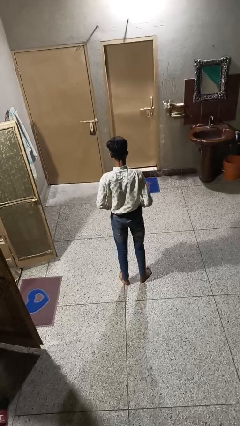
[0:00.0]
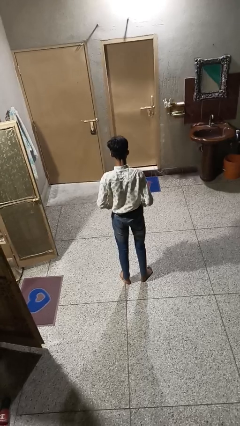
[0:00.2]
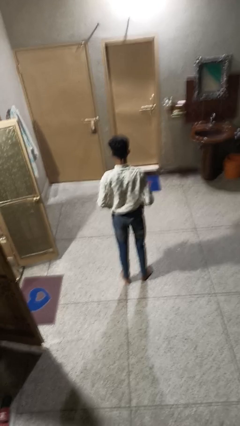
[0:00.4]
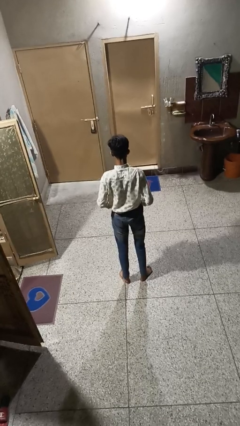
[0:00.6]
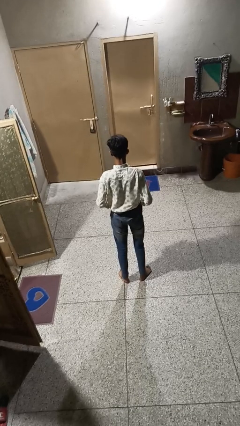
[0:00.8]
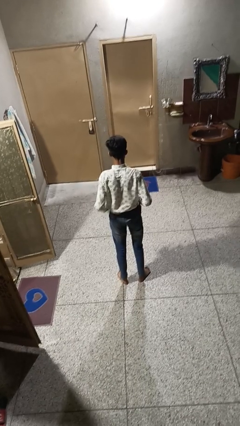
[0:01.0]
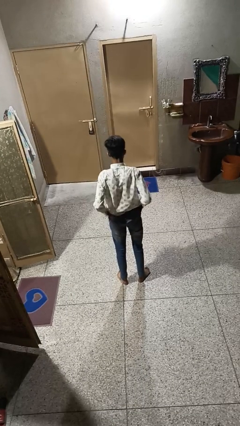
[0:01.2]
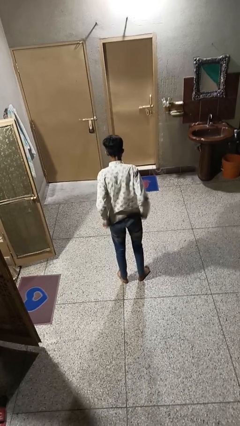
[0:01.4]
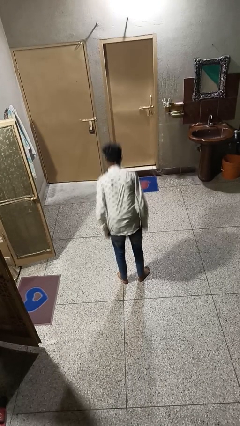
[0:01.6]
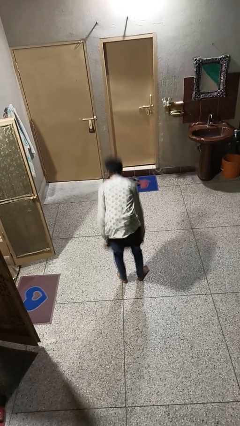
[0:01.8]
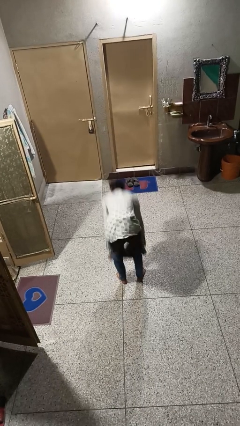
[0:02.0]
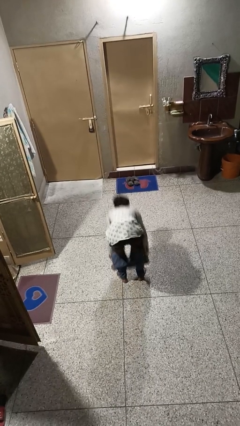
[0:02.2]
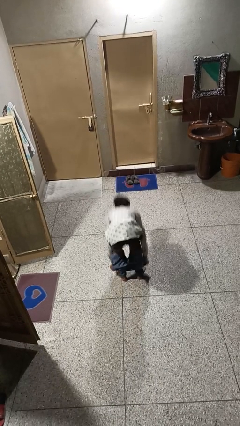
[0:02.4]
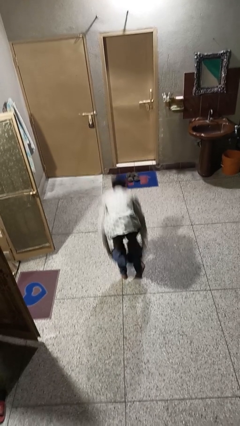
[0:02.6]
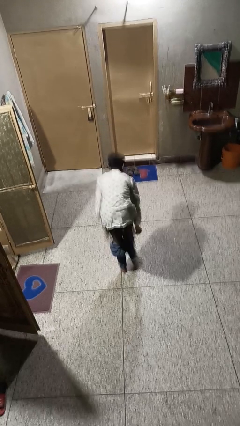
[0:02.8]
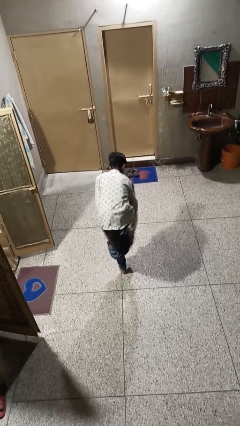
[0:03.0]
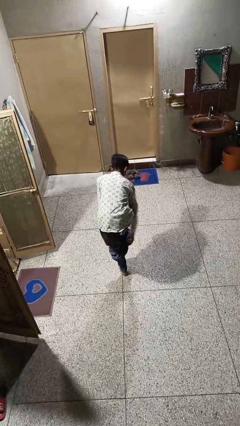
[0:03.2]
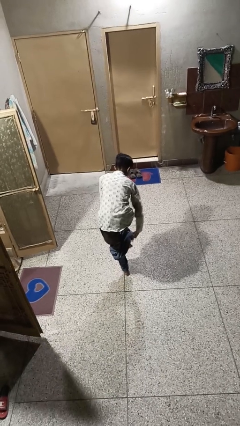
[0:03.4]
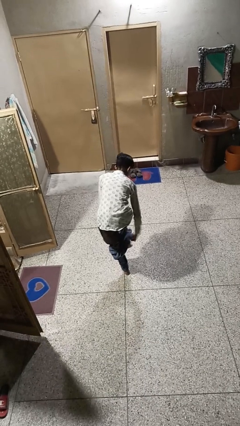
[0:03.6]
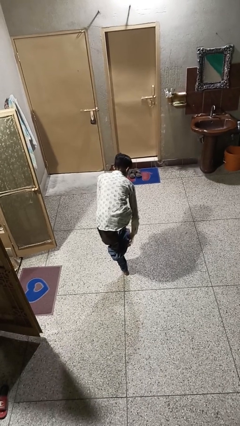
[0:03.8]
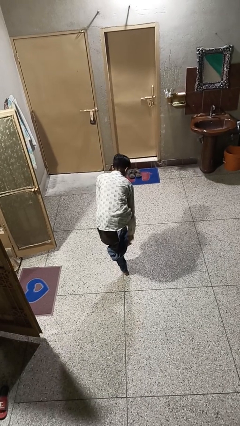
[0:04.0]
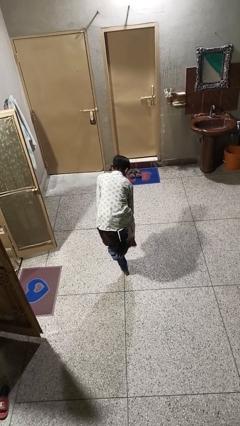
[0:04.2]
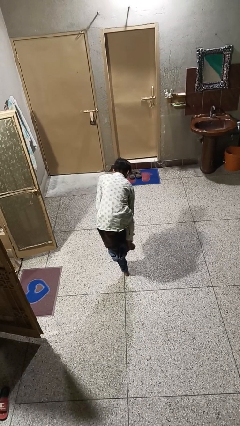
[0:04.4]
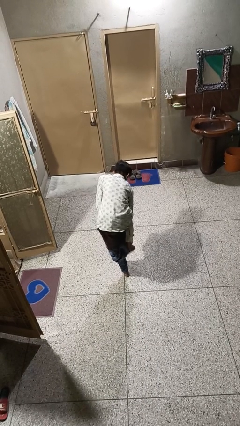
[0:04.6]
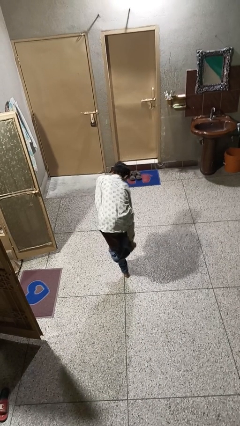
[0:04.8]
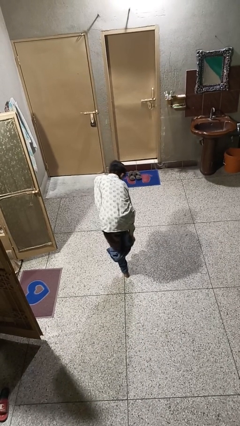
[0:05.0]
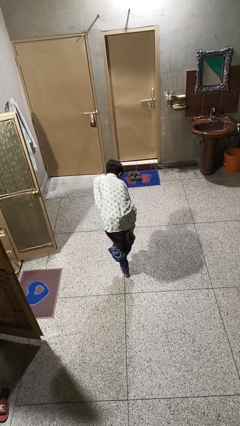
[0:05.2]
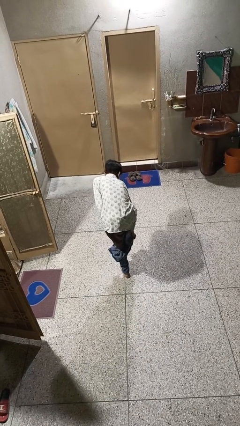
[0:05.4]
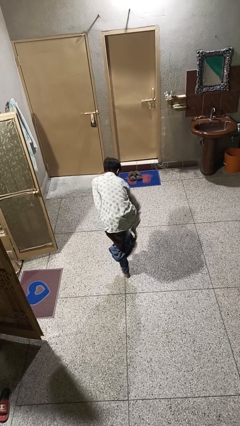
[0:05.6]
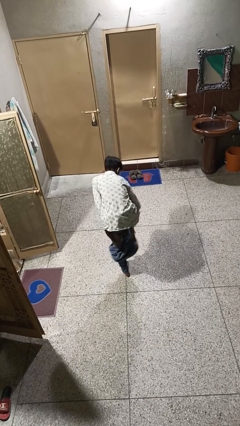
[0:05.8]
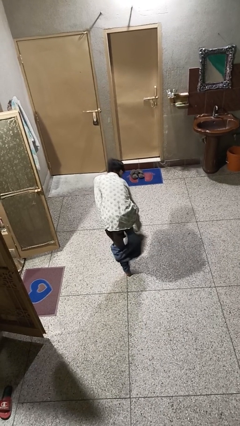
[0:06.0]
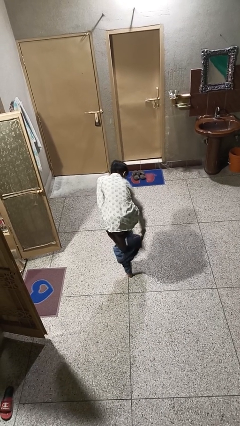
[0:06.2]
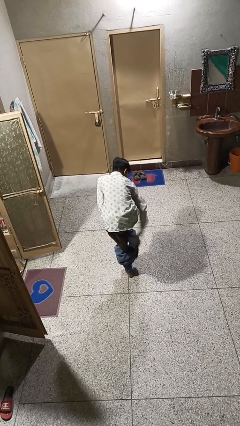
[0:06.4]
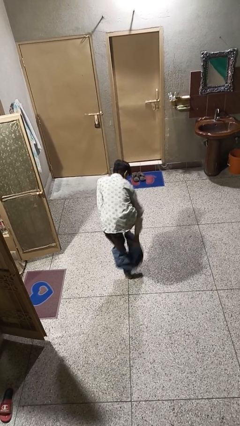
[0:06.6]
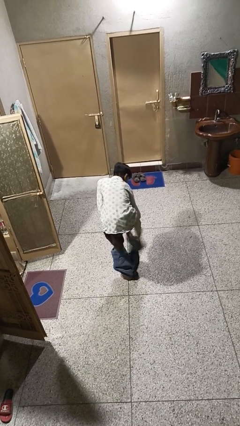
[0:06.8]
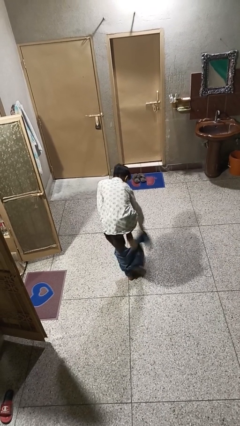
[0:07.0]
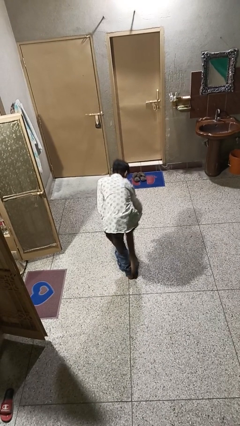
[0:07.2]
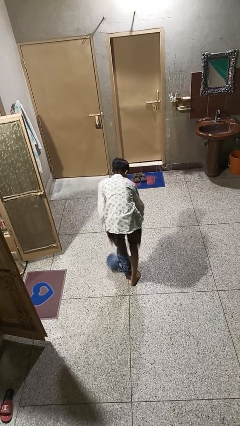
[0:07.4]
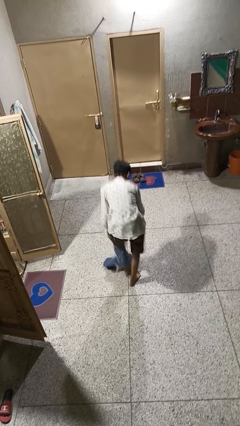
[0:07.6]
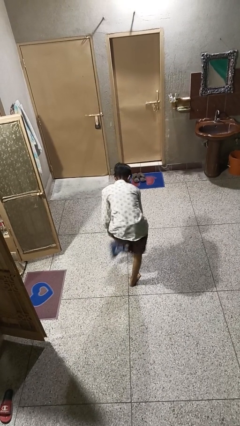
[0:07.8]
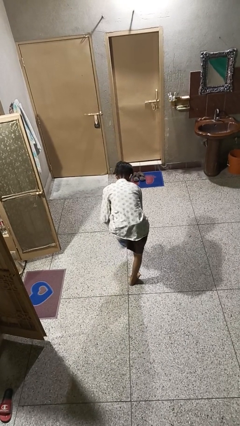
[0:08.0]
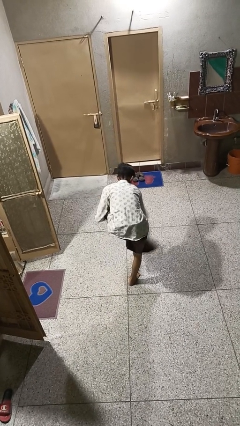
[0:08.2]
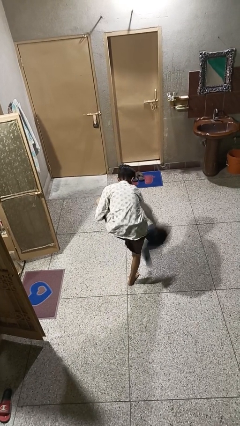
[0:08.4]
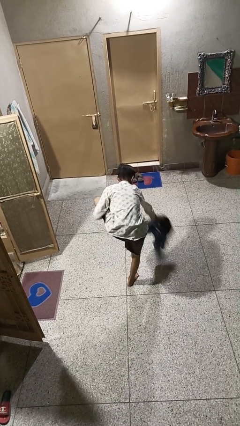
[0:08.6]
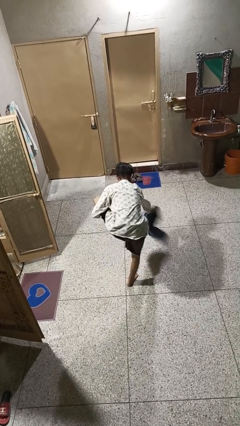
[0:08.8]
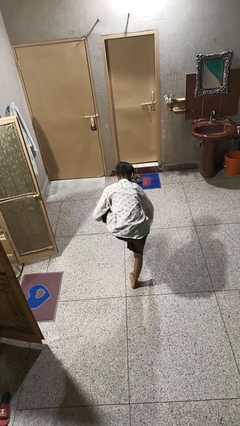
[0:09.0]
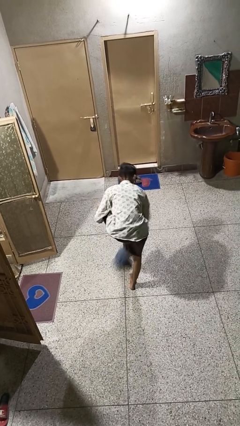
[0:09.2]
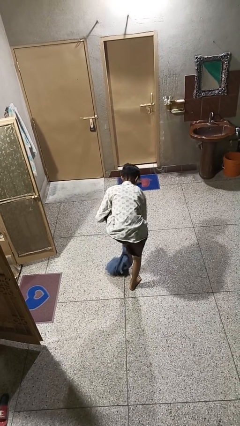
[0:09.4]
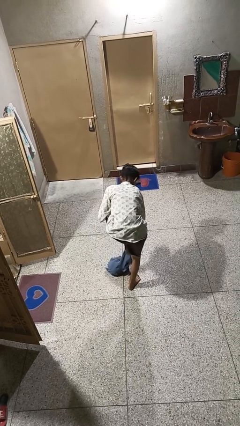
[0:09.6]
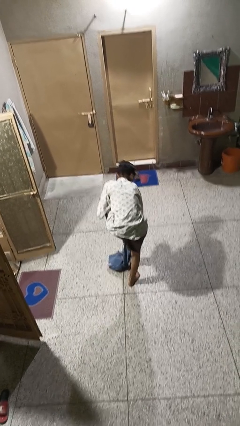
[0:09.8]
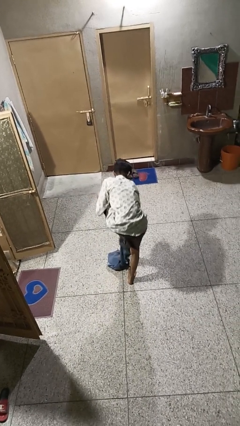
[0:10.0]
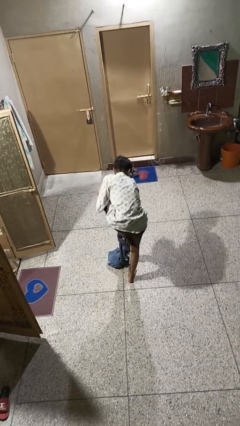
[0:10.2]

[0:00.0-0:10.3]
person takes off pants

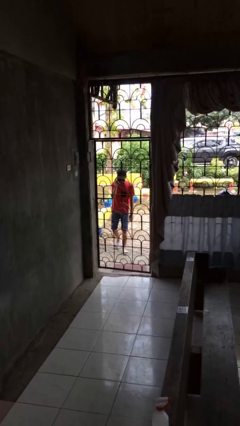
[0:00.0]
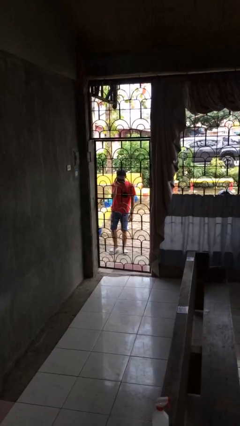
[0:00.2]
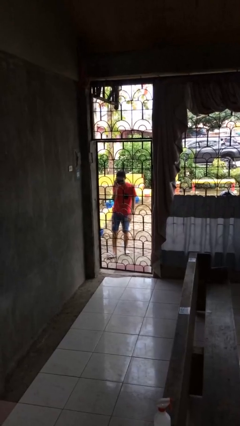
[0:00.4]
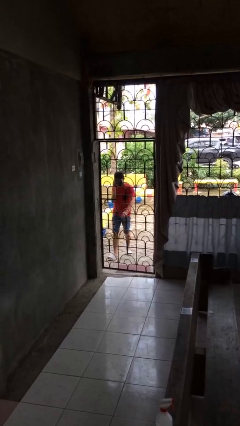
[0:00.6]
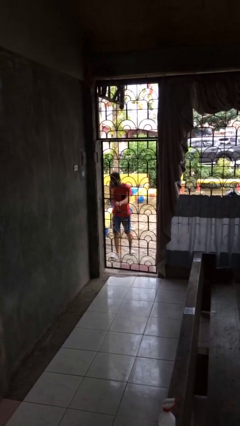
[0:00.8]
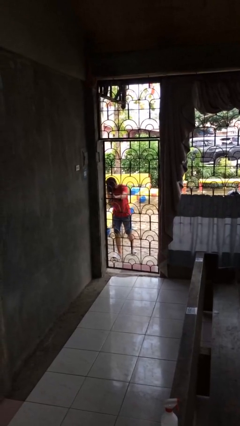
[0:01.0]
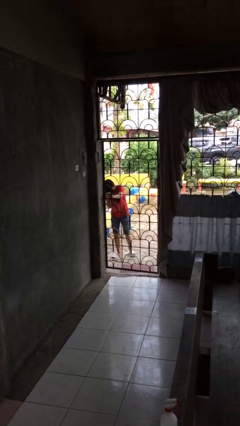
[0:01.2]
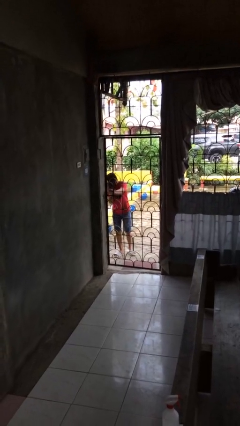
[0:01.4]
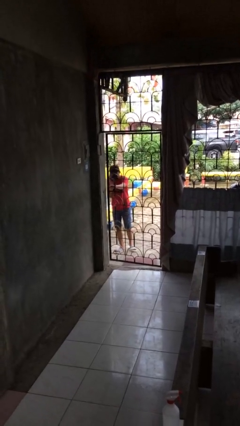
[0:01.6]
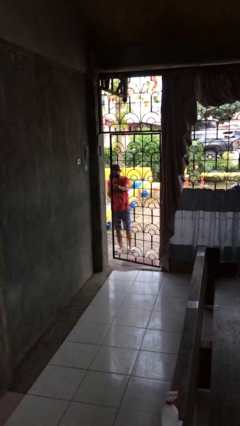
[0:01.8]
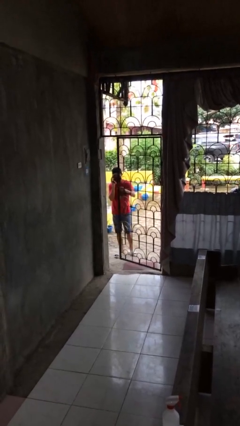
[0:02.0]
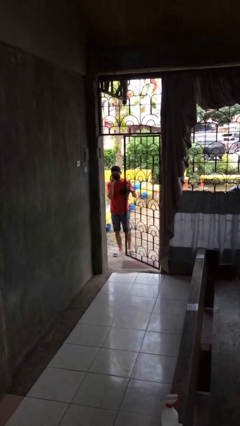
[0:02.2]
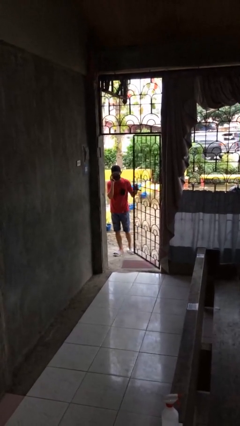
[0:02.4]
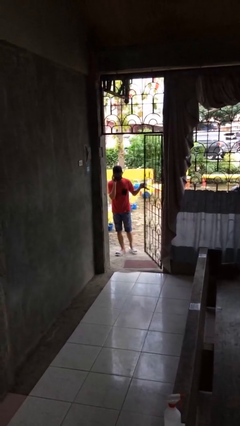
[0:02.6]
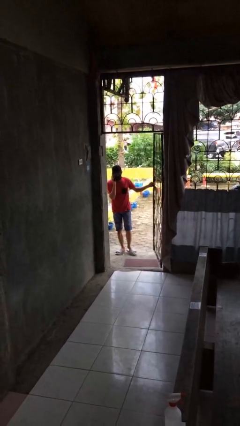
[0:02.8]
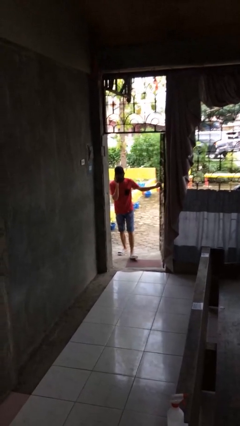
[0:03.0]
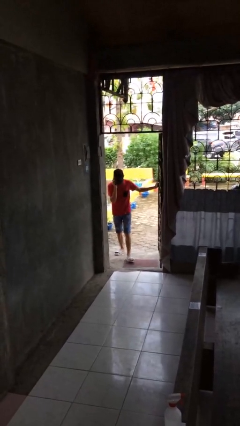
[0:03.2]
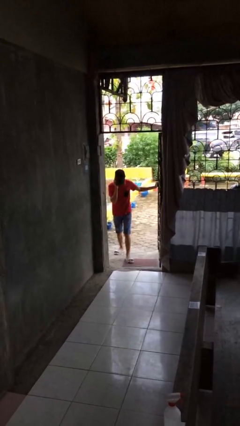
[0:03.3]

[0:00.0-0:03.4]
person opens facility door

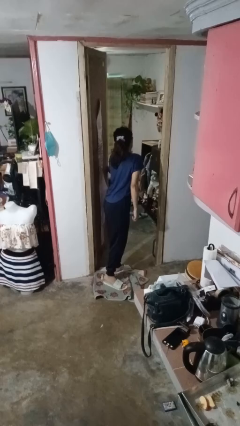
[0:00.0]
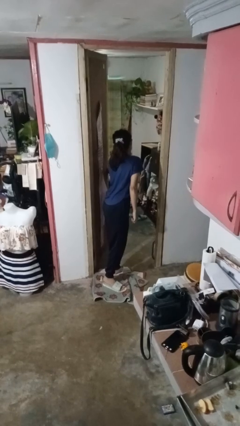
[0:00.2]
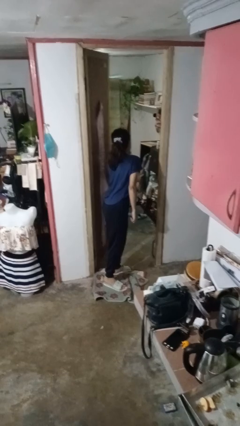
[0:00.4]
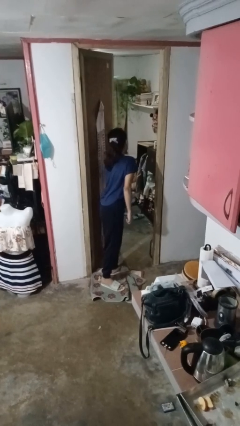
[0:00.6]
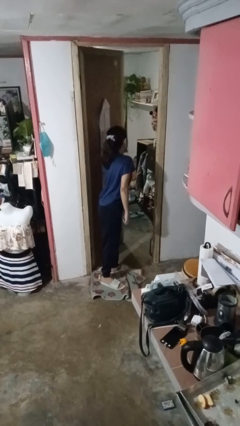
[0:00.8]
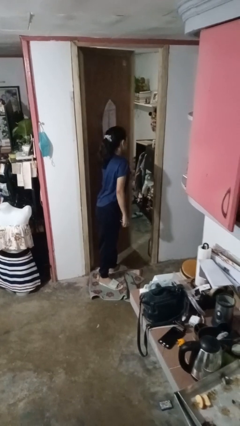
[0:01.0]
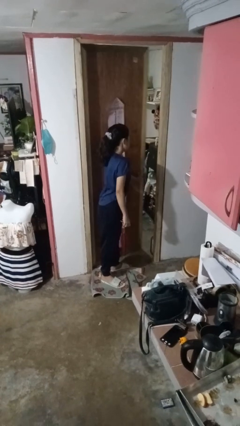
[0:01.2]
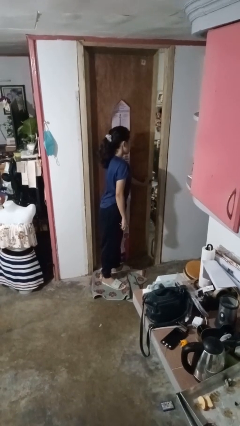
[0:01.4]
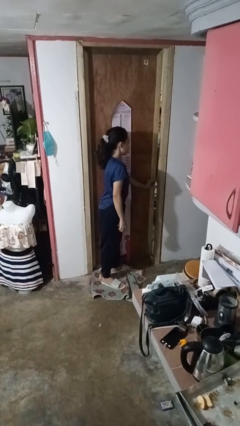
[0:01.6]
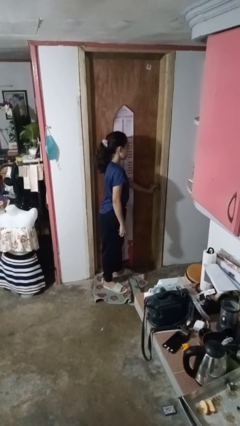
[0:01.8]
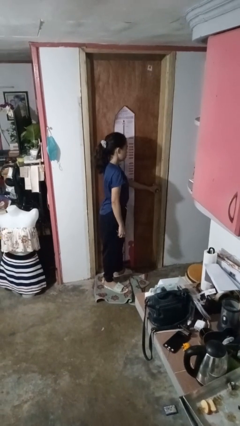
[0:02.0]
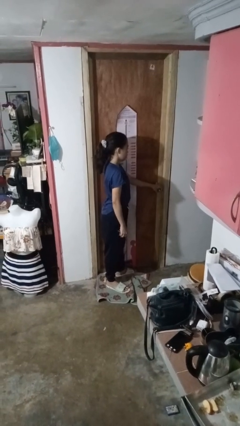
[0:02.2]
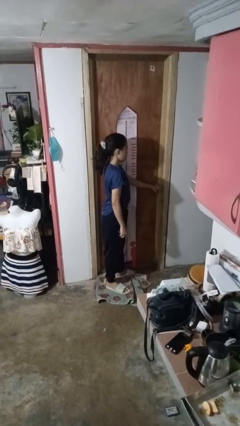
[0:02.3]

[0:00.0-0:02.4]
person closes facility door

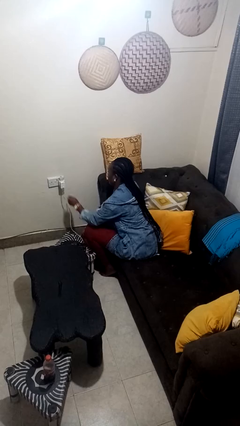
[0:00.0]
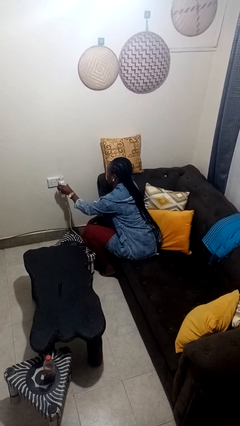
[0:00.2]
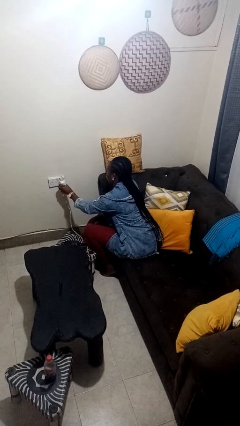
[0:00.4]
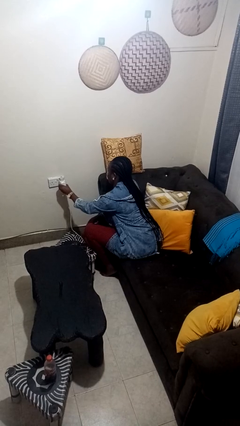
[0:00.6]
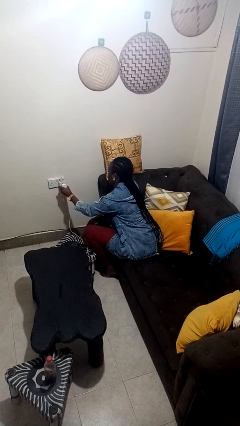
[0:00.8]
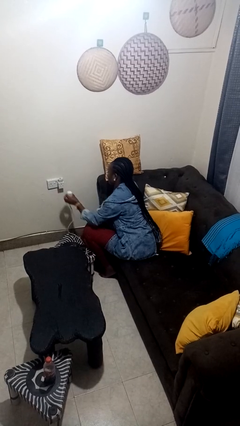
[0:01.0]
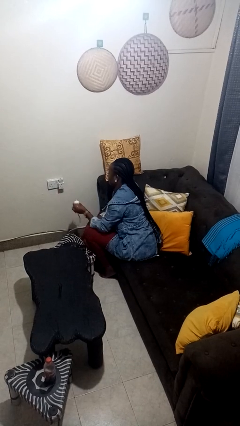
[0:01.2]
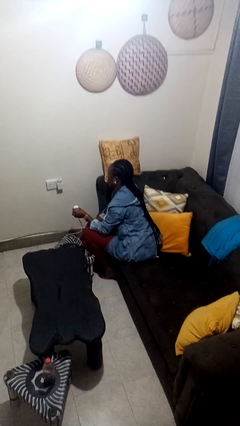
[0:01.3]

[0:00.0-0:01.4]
person unplugs from electrical socket

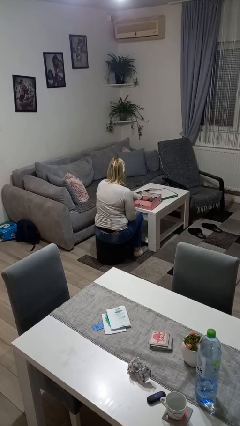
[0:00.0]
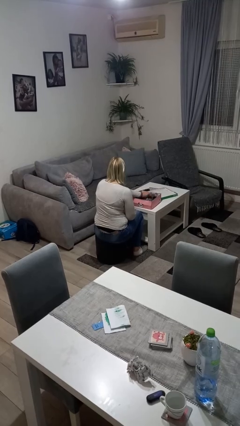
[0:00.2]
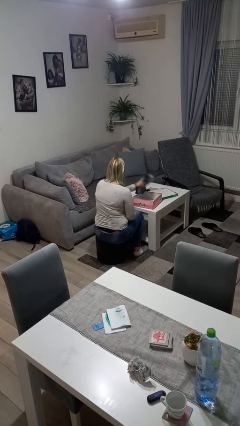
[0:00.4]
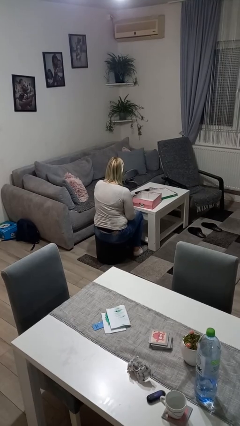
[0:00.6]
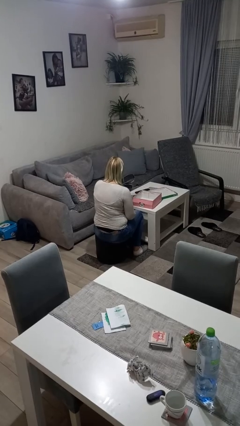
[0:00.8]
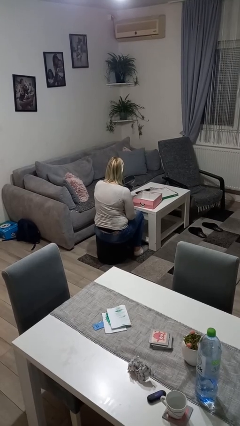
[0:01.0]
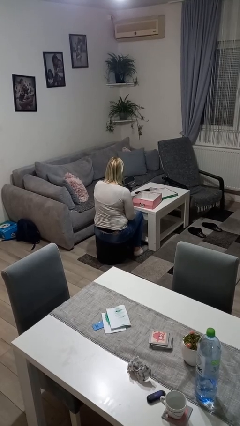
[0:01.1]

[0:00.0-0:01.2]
person takes object from box
